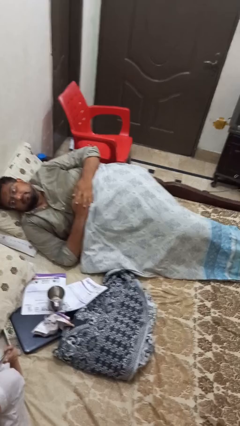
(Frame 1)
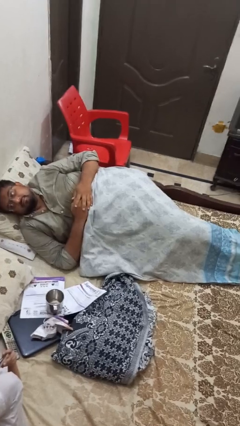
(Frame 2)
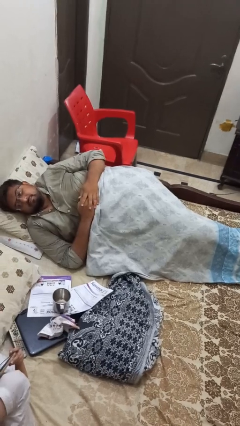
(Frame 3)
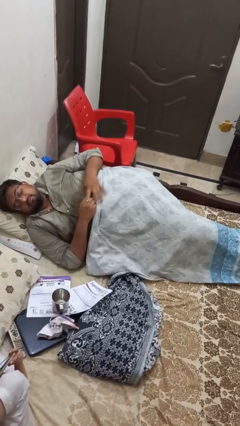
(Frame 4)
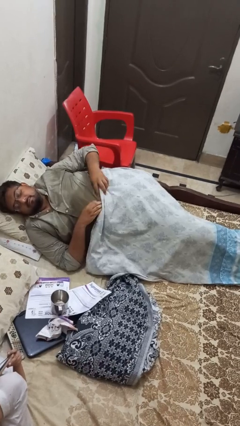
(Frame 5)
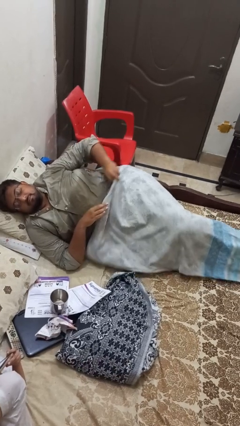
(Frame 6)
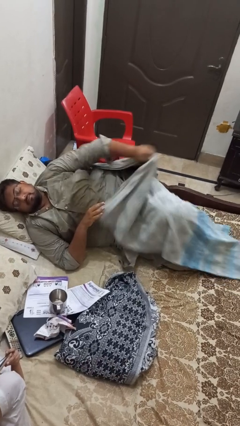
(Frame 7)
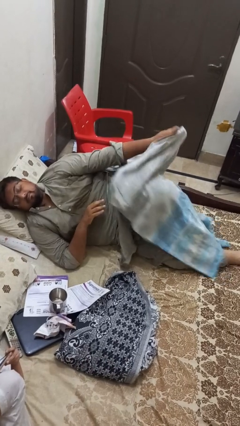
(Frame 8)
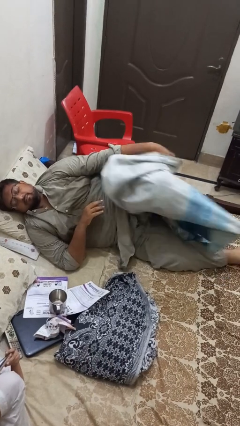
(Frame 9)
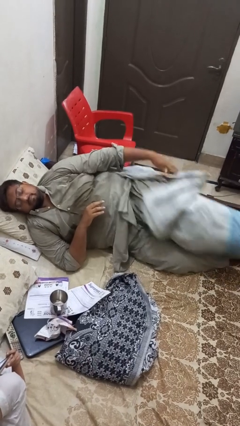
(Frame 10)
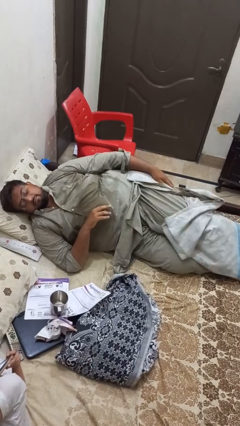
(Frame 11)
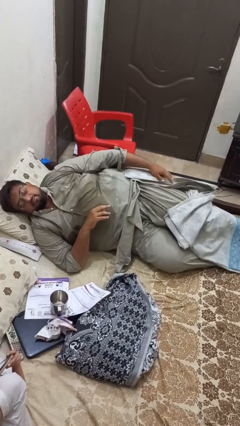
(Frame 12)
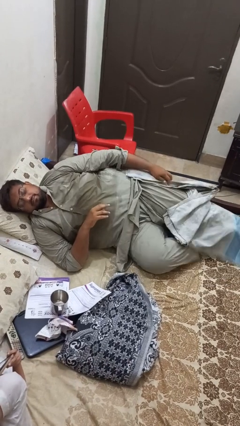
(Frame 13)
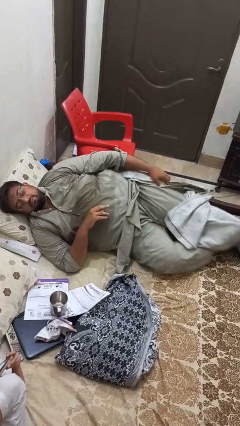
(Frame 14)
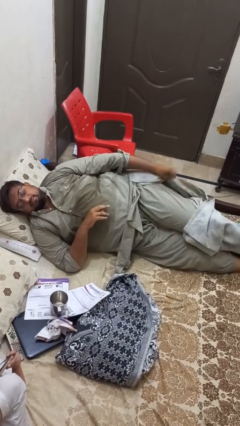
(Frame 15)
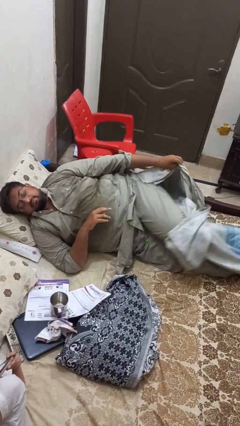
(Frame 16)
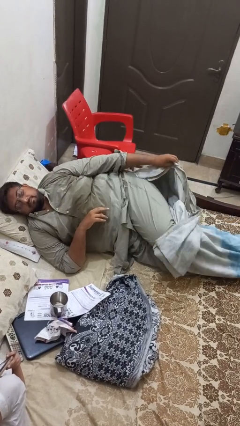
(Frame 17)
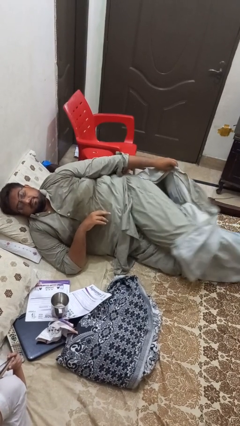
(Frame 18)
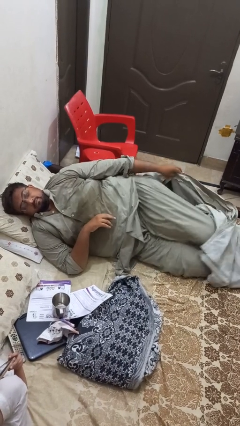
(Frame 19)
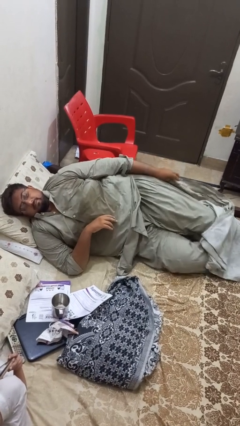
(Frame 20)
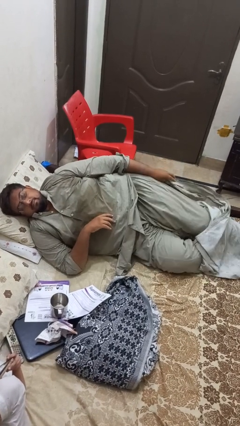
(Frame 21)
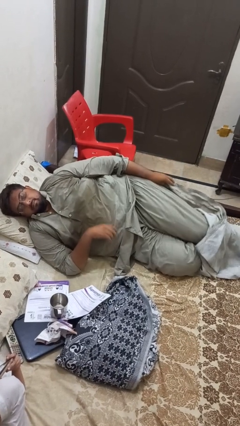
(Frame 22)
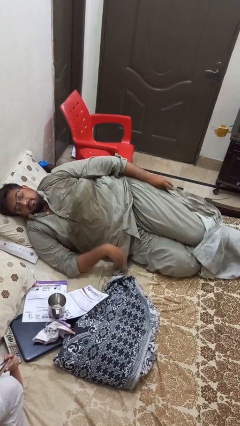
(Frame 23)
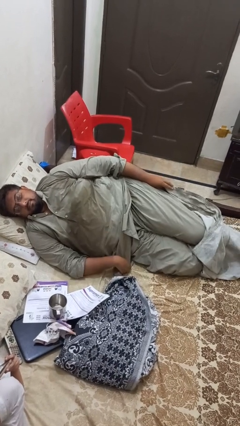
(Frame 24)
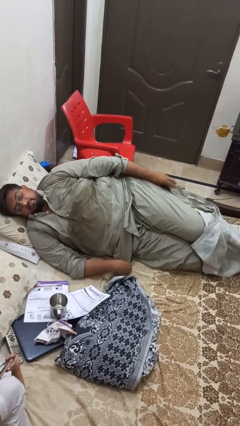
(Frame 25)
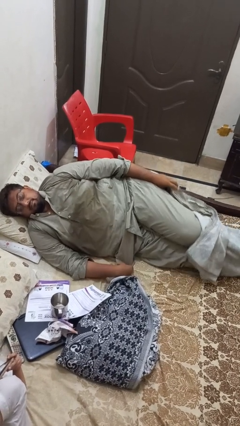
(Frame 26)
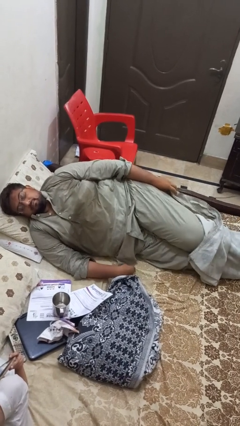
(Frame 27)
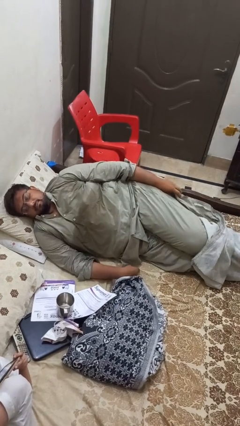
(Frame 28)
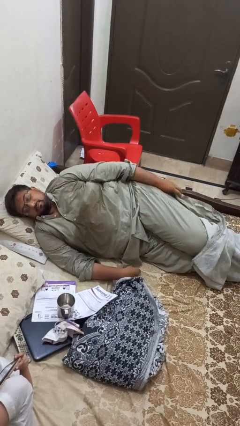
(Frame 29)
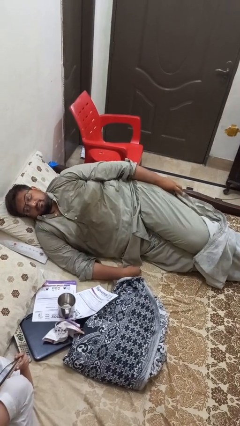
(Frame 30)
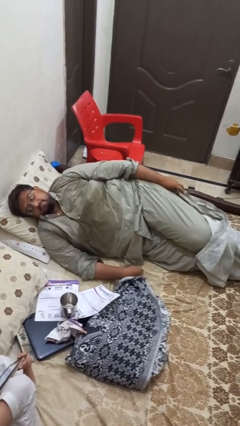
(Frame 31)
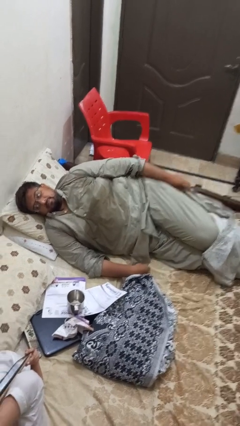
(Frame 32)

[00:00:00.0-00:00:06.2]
person uncovers with bedsheets

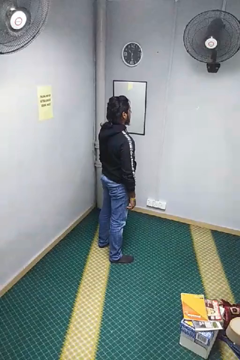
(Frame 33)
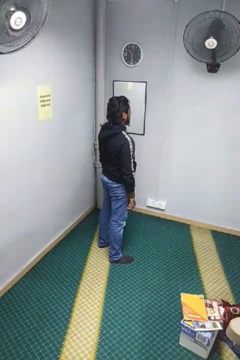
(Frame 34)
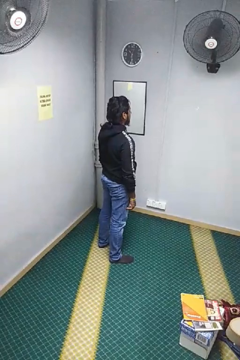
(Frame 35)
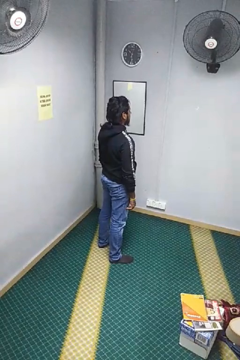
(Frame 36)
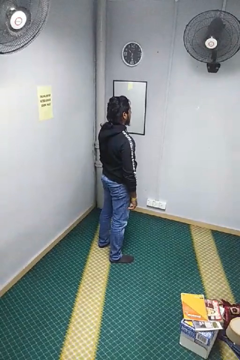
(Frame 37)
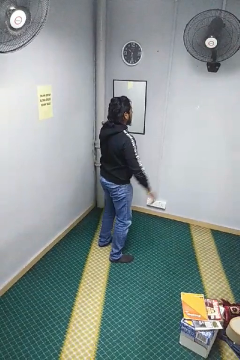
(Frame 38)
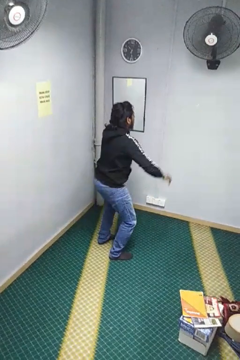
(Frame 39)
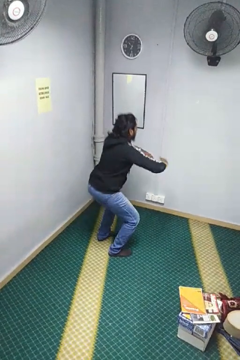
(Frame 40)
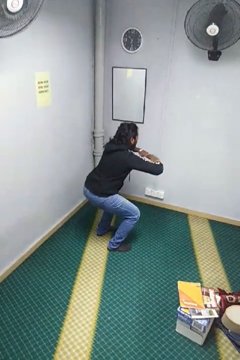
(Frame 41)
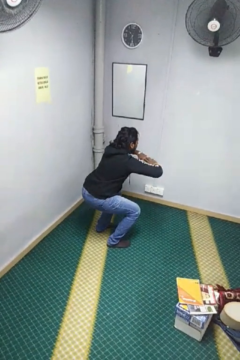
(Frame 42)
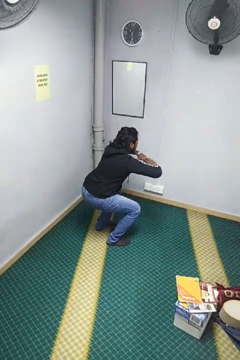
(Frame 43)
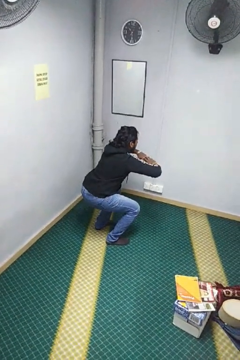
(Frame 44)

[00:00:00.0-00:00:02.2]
person squats

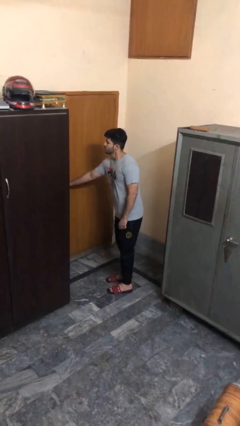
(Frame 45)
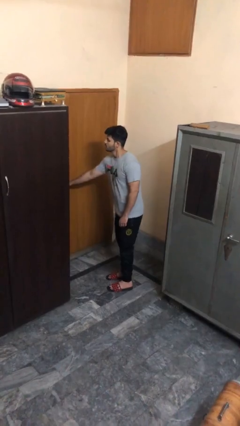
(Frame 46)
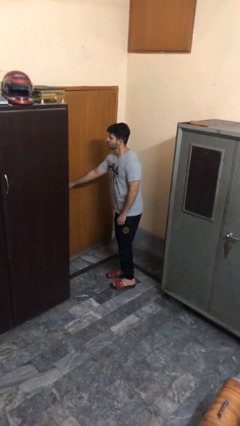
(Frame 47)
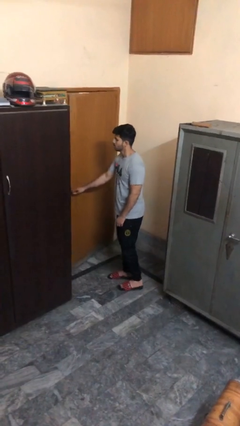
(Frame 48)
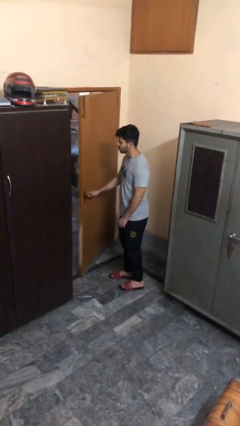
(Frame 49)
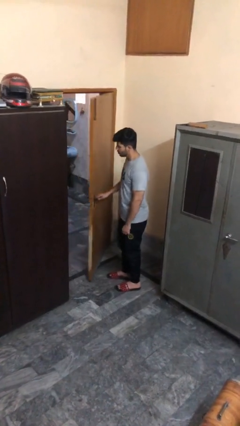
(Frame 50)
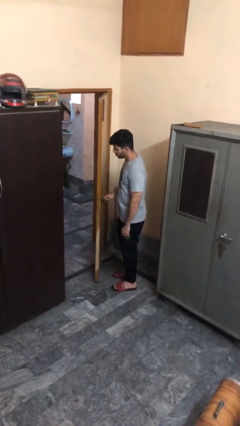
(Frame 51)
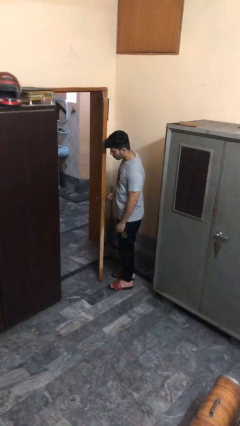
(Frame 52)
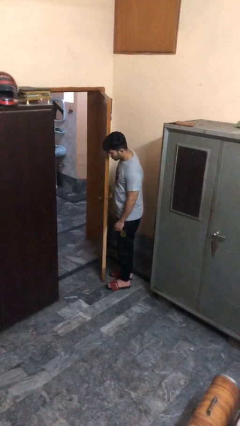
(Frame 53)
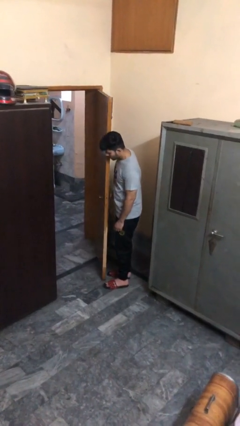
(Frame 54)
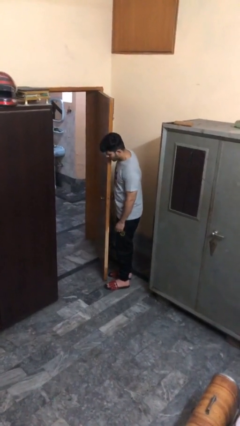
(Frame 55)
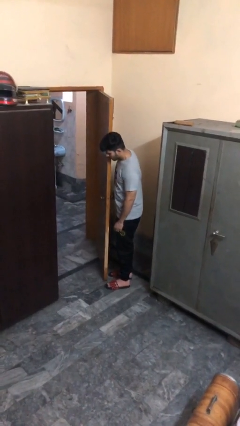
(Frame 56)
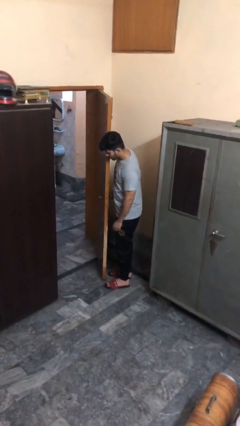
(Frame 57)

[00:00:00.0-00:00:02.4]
person opens facility door

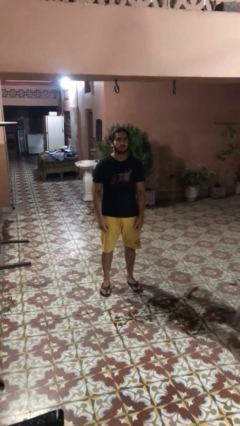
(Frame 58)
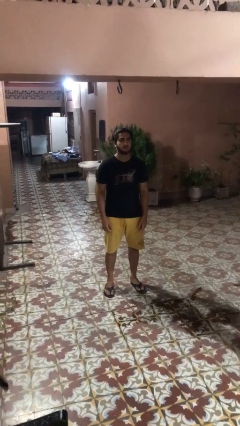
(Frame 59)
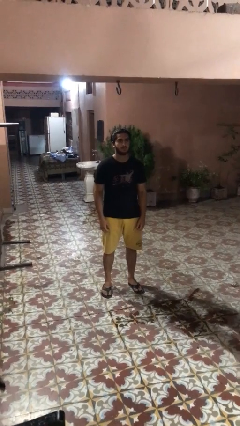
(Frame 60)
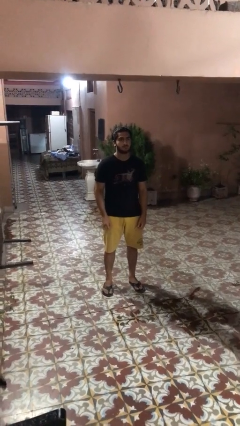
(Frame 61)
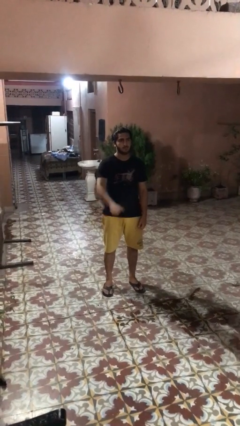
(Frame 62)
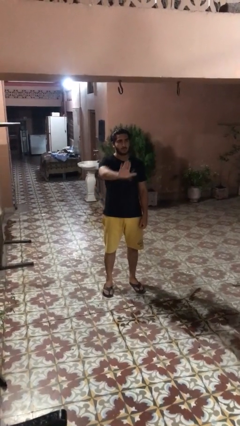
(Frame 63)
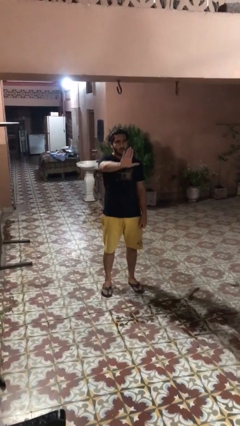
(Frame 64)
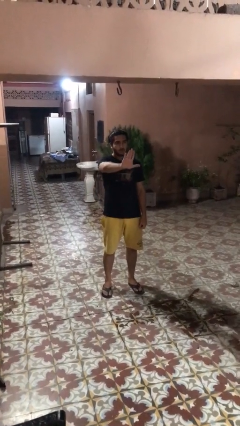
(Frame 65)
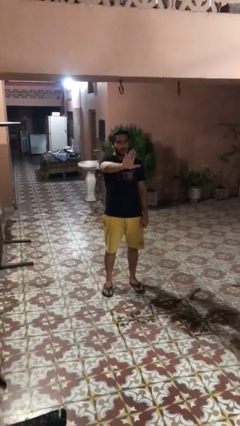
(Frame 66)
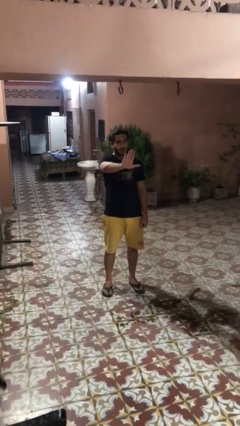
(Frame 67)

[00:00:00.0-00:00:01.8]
person gestures stop

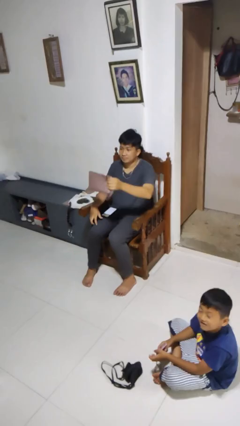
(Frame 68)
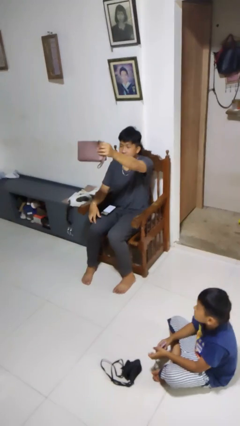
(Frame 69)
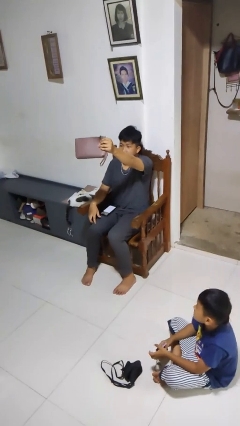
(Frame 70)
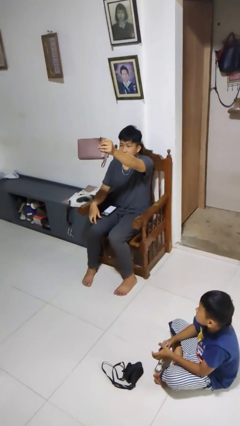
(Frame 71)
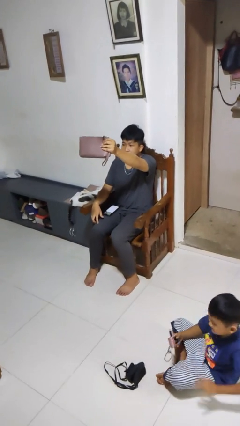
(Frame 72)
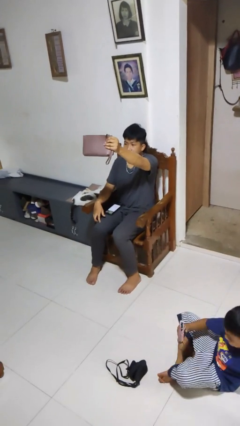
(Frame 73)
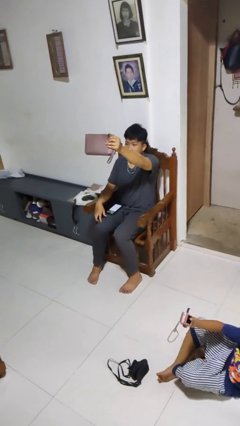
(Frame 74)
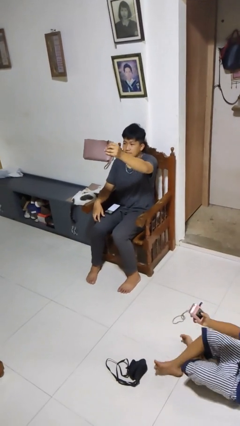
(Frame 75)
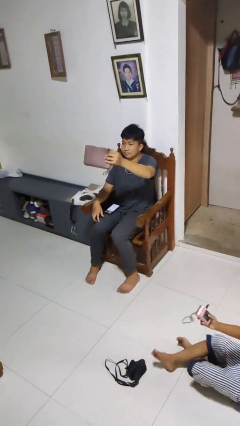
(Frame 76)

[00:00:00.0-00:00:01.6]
person holds object above head

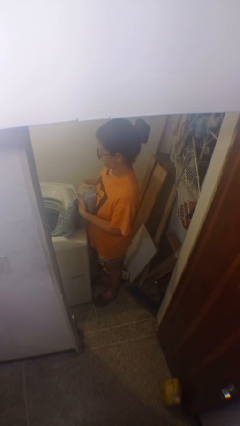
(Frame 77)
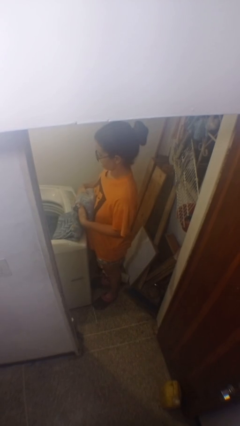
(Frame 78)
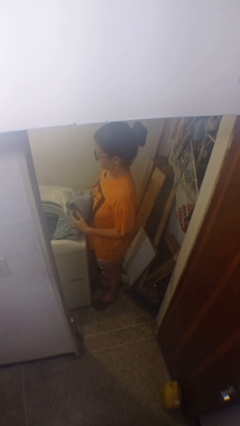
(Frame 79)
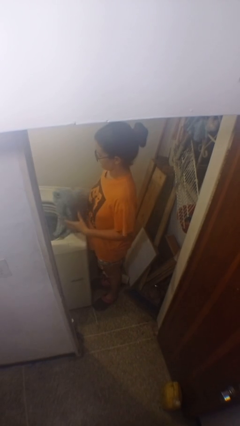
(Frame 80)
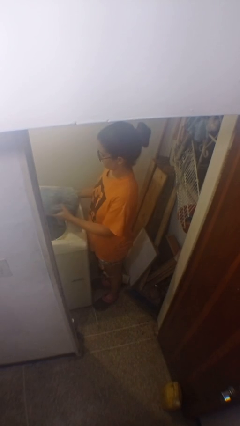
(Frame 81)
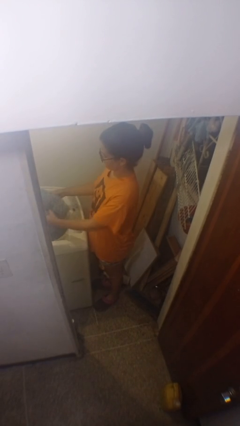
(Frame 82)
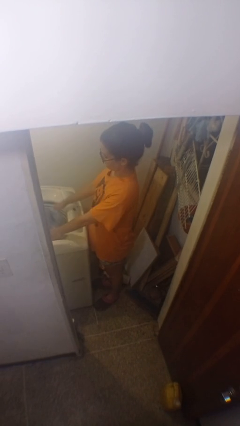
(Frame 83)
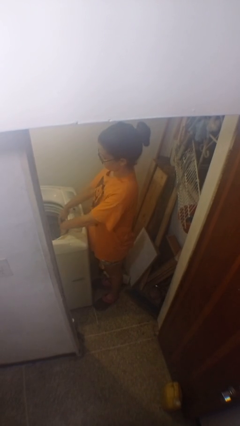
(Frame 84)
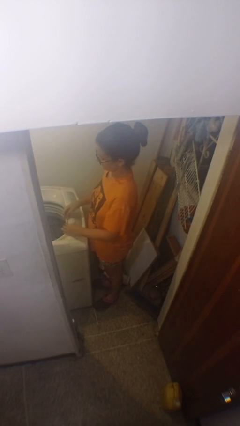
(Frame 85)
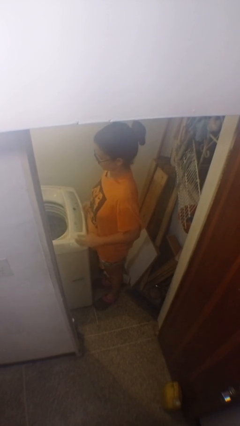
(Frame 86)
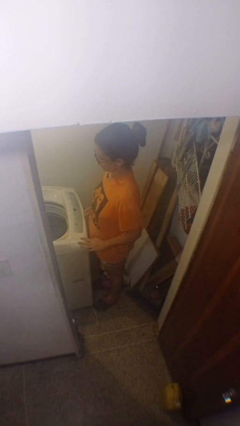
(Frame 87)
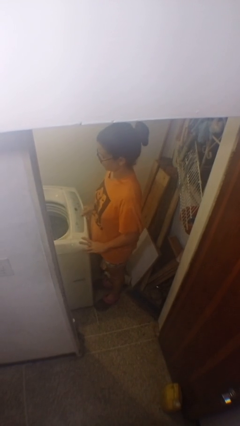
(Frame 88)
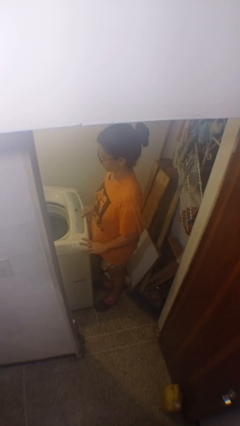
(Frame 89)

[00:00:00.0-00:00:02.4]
person loads clotheswasher

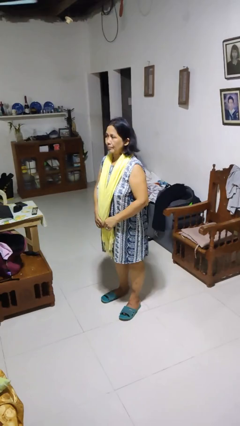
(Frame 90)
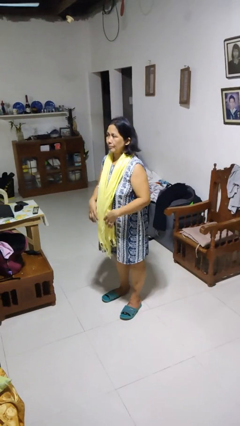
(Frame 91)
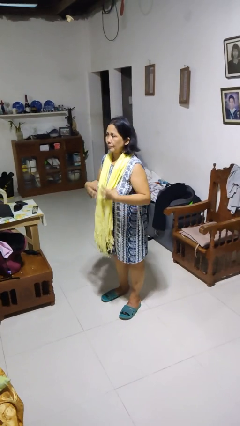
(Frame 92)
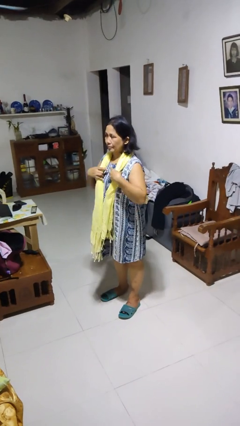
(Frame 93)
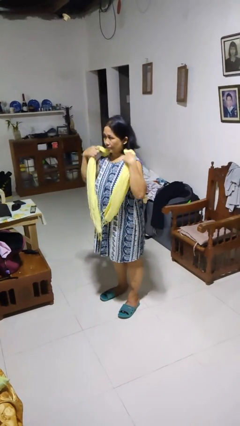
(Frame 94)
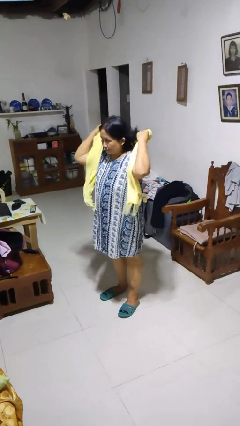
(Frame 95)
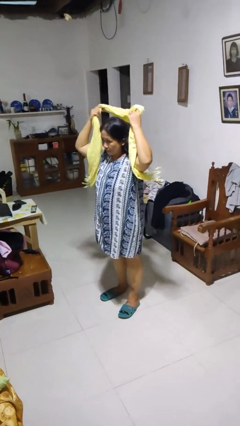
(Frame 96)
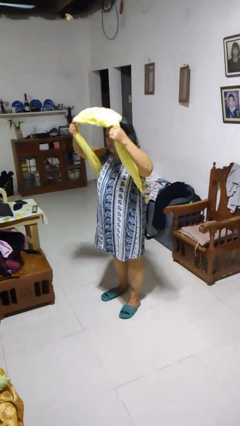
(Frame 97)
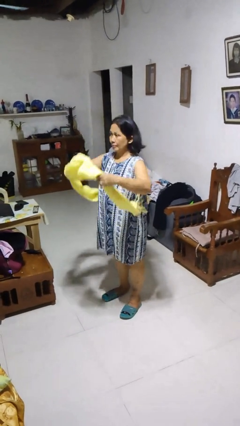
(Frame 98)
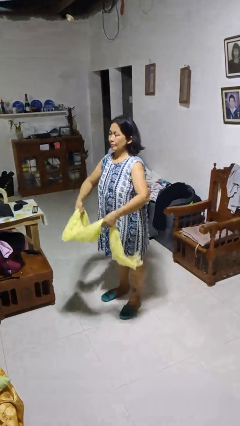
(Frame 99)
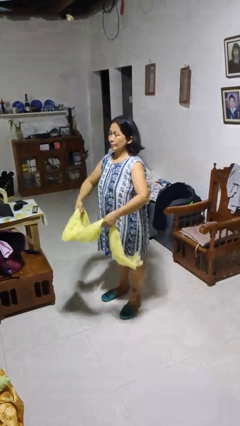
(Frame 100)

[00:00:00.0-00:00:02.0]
person takes off scarf
